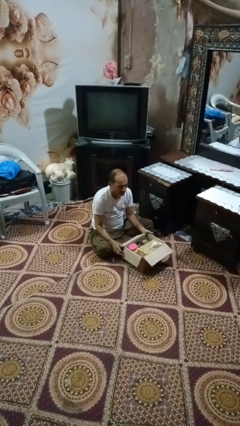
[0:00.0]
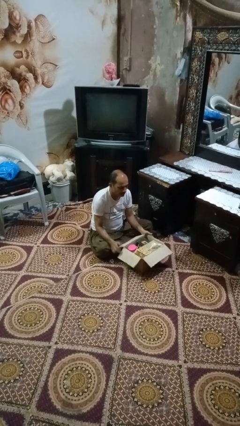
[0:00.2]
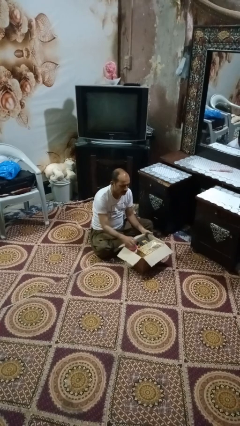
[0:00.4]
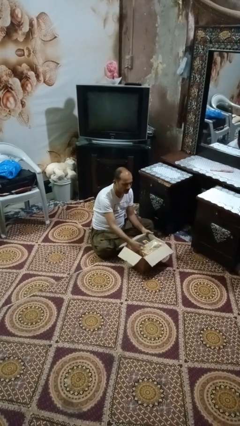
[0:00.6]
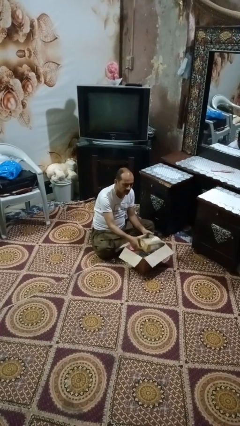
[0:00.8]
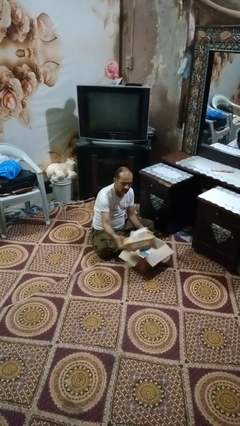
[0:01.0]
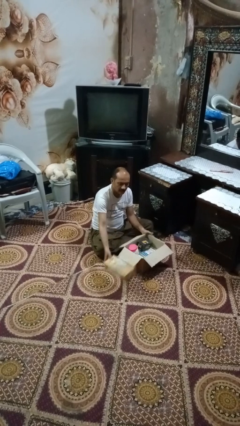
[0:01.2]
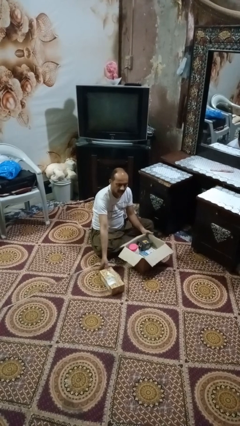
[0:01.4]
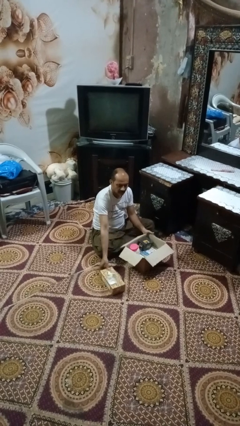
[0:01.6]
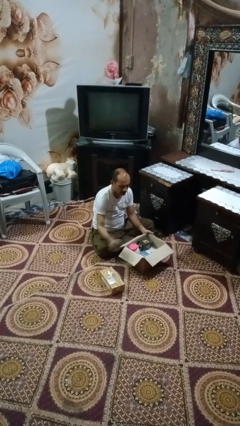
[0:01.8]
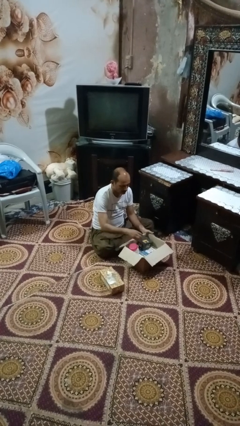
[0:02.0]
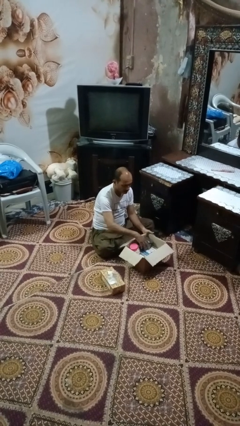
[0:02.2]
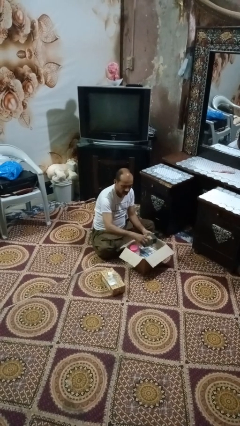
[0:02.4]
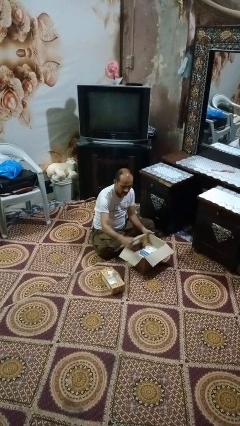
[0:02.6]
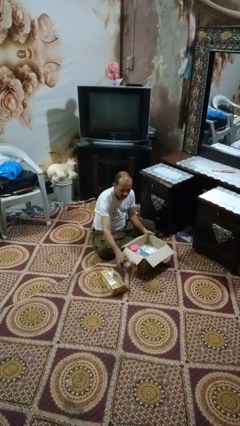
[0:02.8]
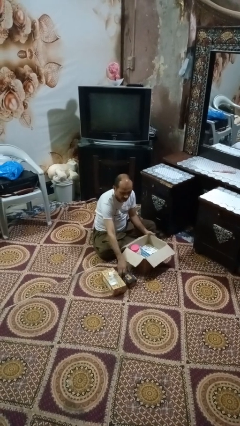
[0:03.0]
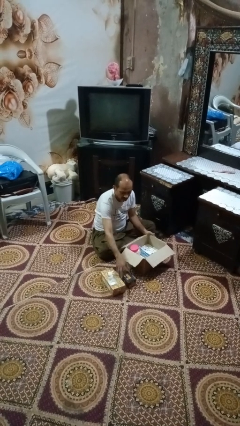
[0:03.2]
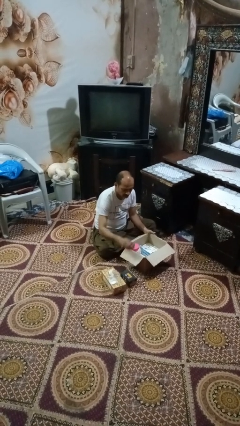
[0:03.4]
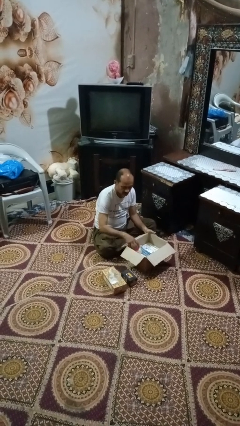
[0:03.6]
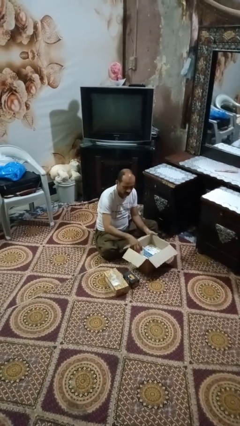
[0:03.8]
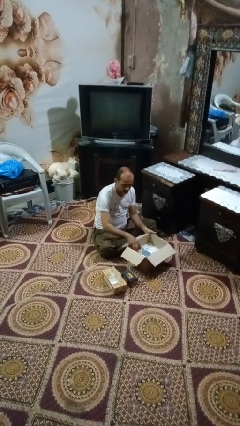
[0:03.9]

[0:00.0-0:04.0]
person takes object from box

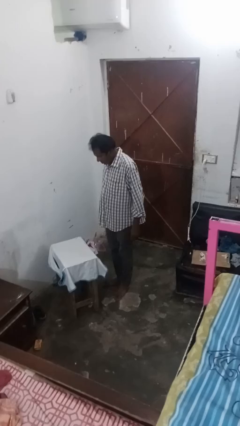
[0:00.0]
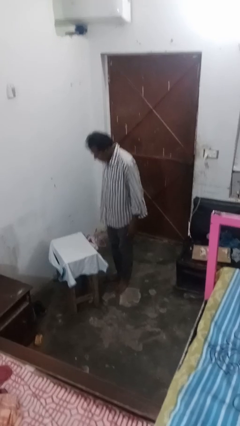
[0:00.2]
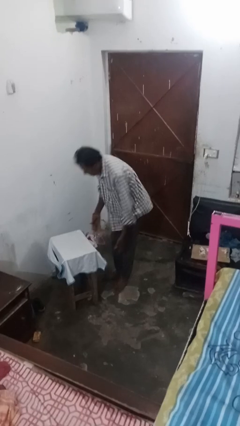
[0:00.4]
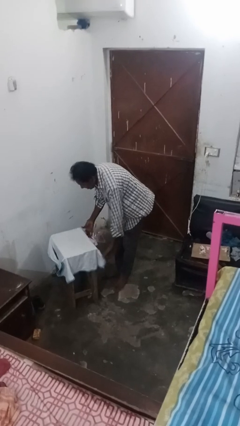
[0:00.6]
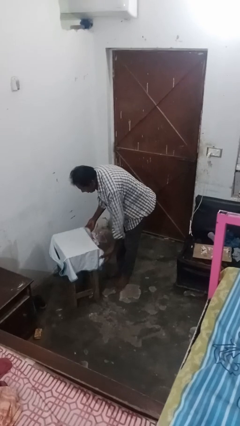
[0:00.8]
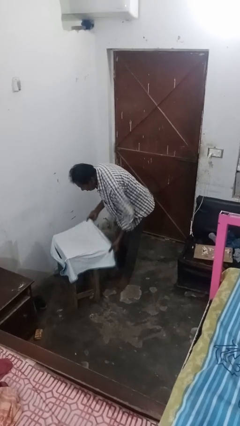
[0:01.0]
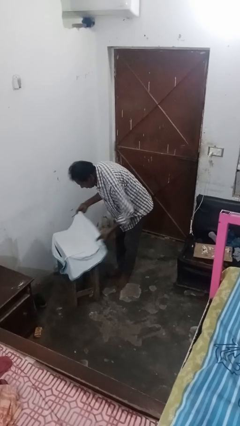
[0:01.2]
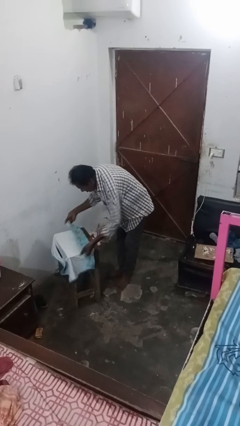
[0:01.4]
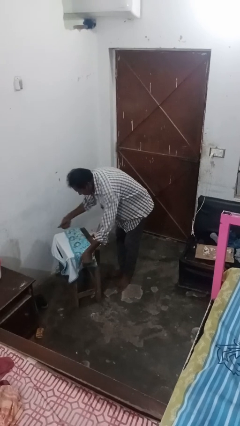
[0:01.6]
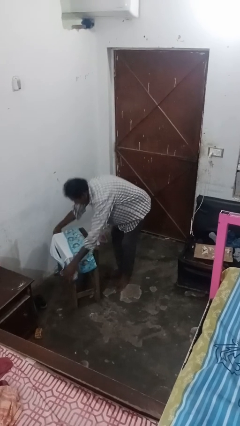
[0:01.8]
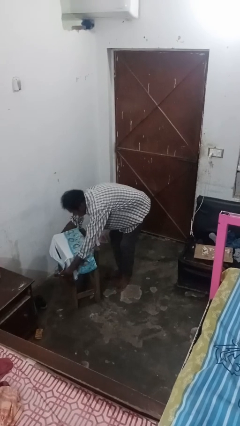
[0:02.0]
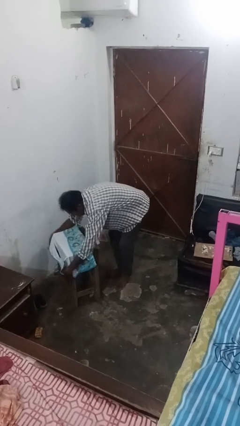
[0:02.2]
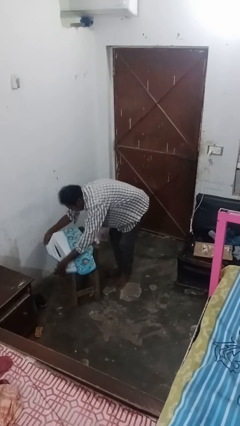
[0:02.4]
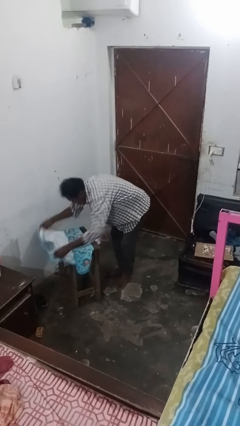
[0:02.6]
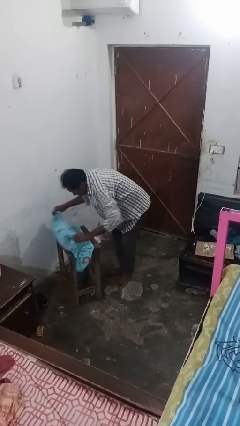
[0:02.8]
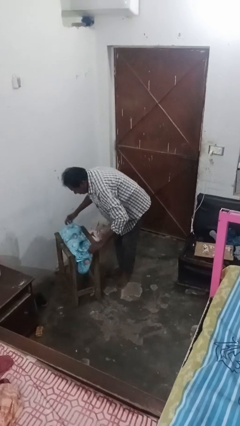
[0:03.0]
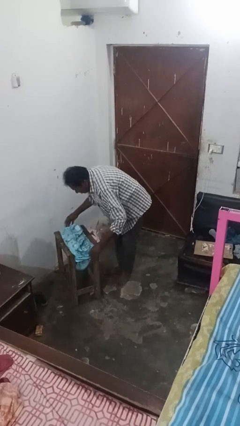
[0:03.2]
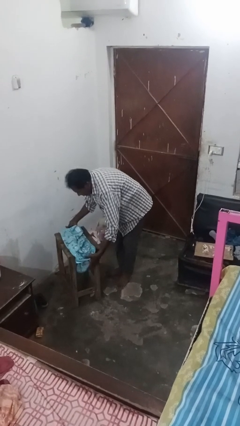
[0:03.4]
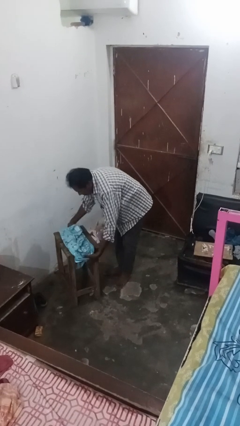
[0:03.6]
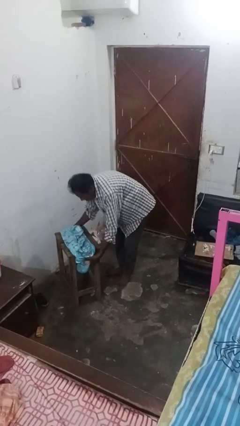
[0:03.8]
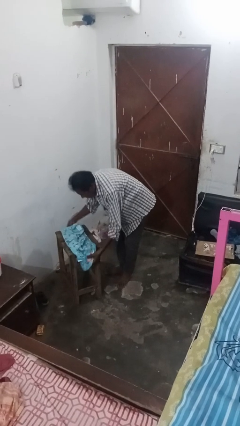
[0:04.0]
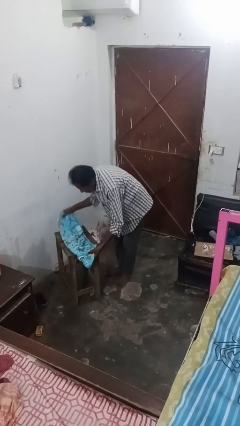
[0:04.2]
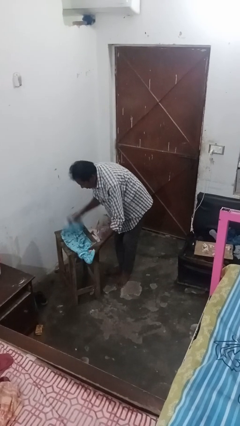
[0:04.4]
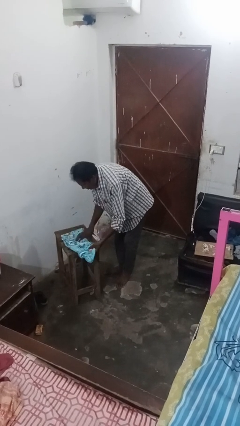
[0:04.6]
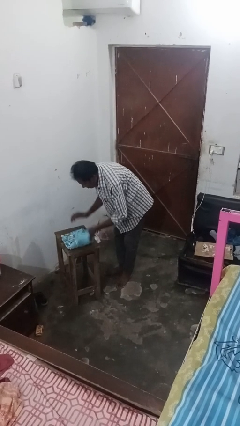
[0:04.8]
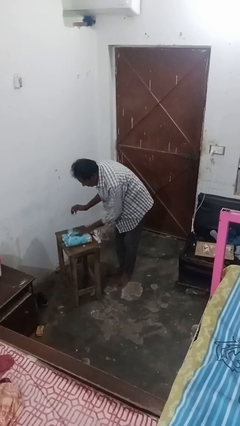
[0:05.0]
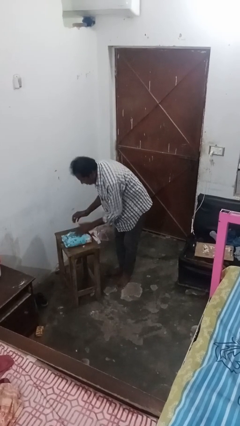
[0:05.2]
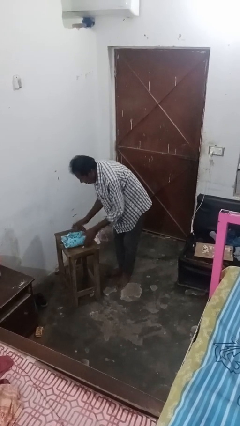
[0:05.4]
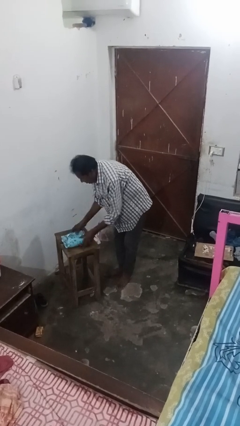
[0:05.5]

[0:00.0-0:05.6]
person spreads tablecloth

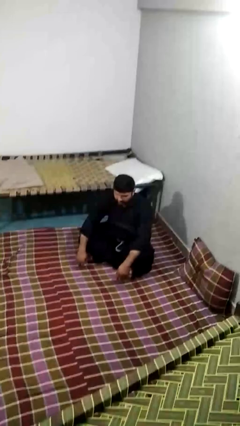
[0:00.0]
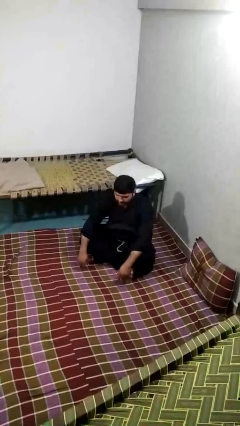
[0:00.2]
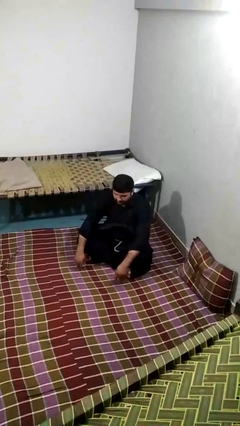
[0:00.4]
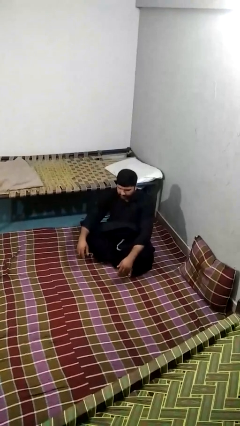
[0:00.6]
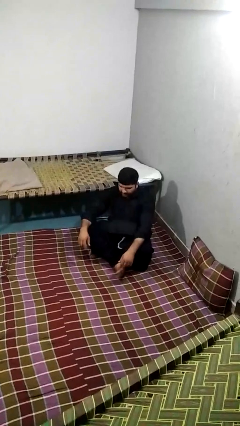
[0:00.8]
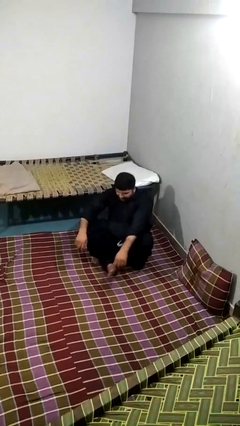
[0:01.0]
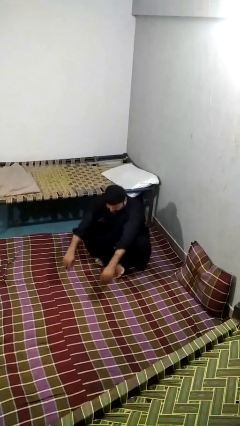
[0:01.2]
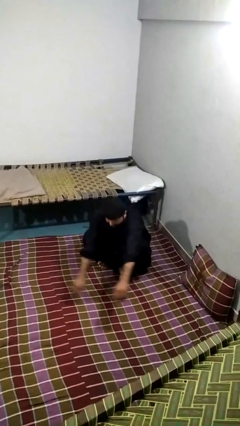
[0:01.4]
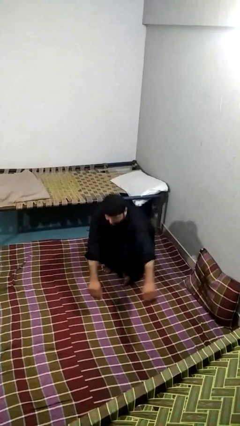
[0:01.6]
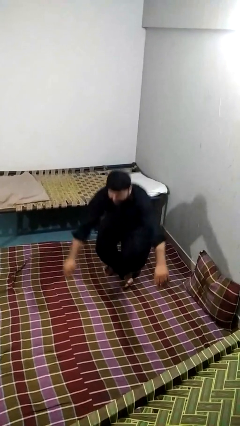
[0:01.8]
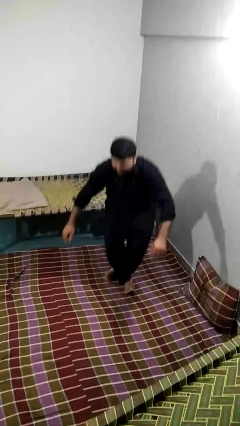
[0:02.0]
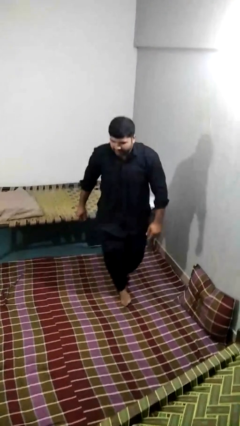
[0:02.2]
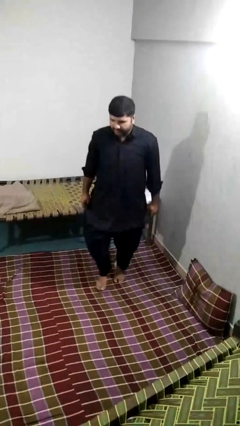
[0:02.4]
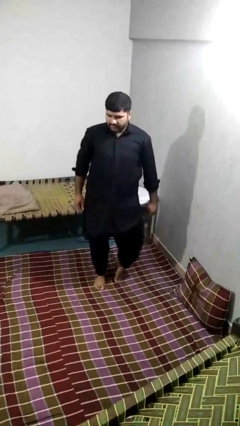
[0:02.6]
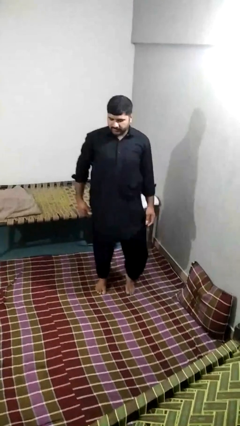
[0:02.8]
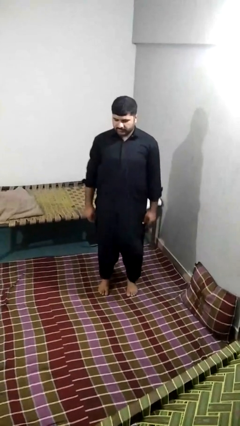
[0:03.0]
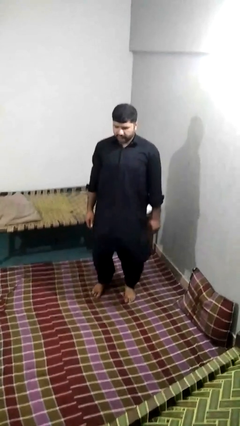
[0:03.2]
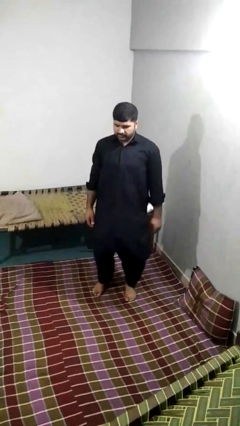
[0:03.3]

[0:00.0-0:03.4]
person stands up from floor

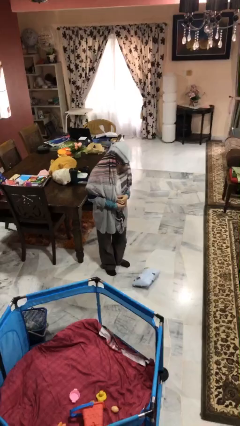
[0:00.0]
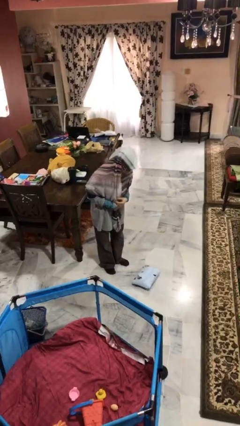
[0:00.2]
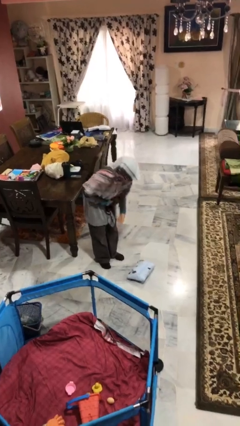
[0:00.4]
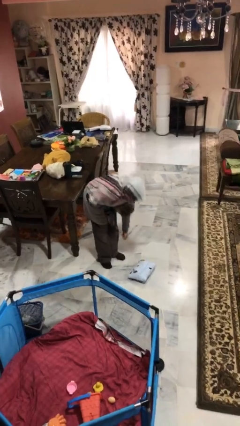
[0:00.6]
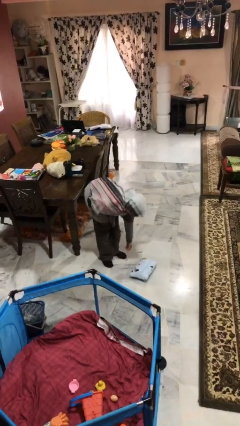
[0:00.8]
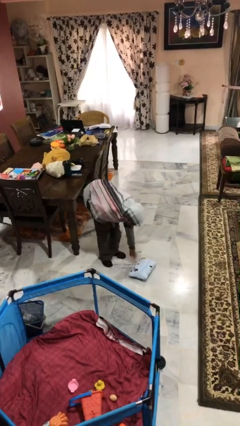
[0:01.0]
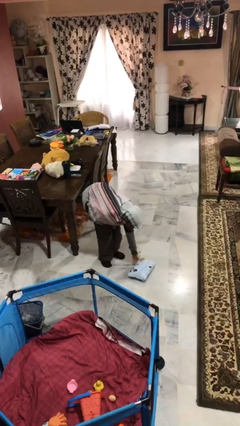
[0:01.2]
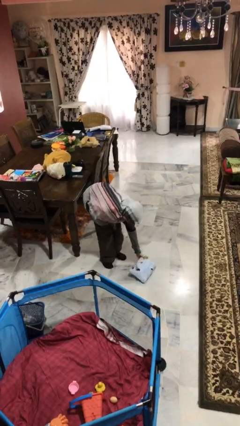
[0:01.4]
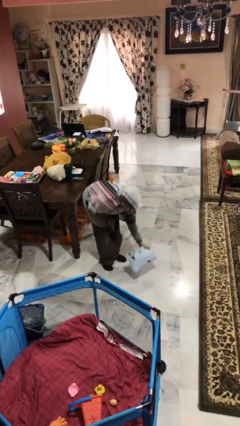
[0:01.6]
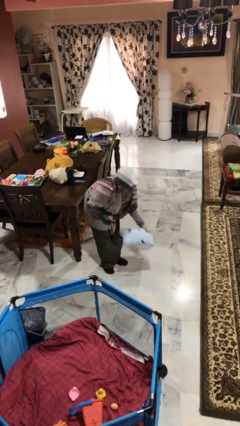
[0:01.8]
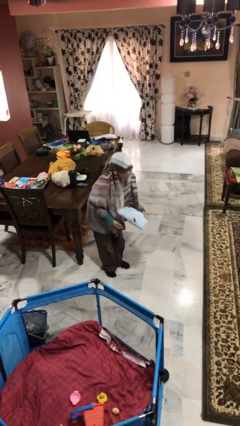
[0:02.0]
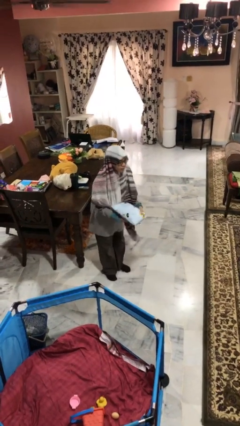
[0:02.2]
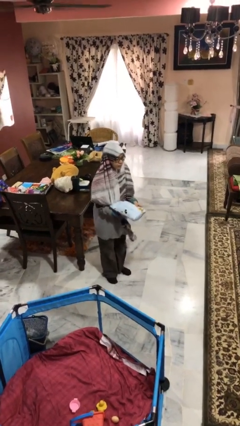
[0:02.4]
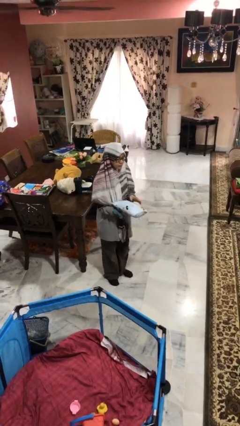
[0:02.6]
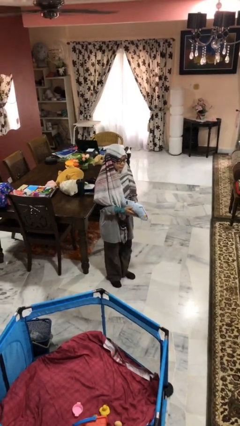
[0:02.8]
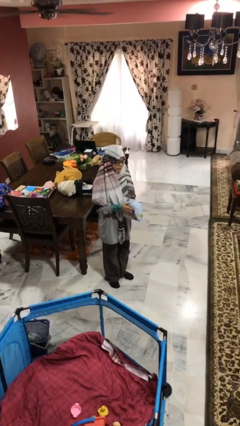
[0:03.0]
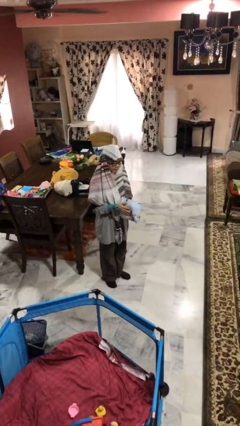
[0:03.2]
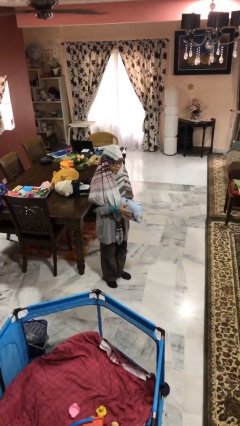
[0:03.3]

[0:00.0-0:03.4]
person picks up object from floor

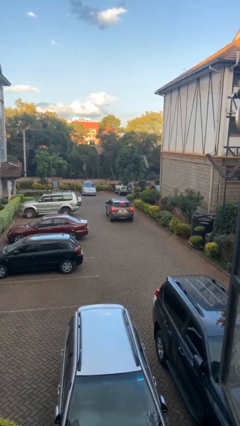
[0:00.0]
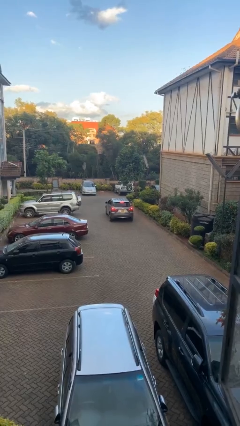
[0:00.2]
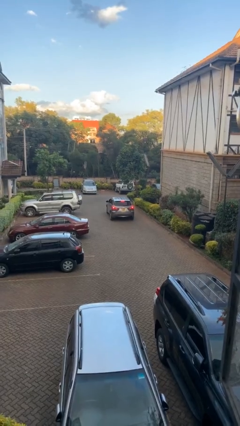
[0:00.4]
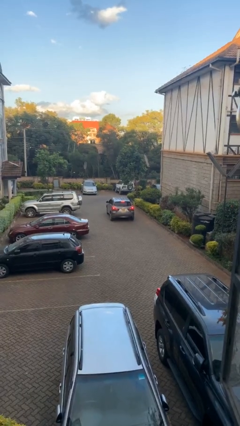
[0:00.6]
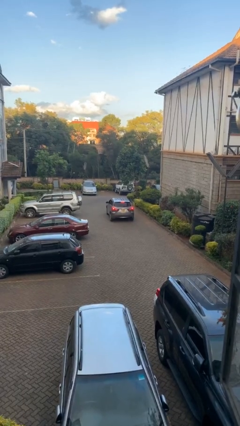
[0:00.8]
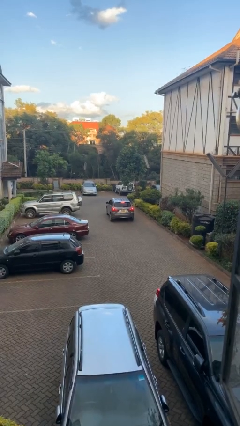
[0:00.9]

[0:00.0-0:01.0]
car picks up person

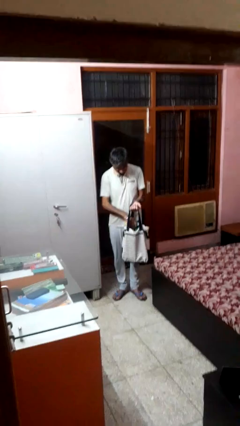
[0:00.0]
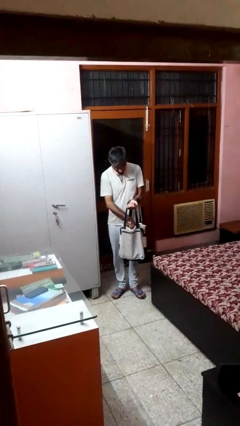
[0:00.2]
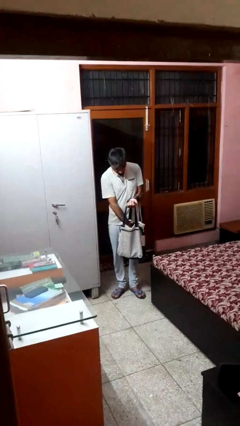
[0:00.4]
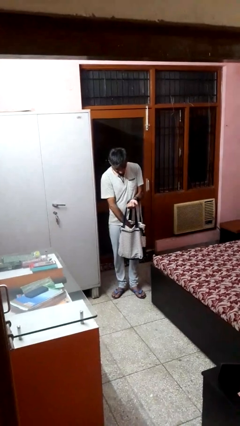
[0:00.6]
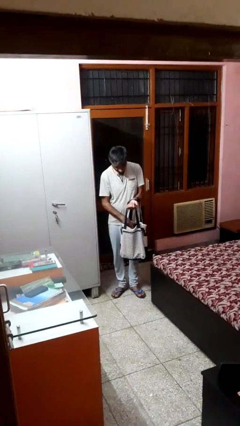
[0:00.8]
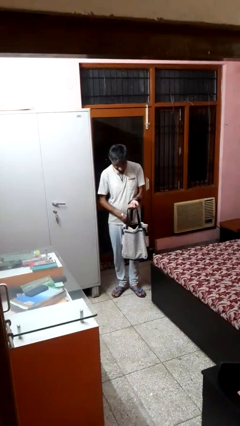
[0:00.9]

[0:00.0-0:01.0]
person puts object into bag
